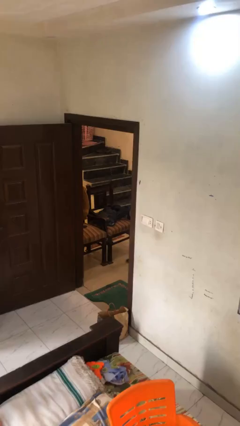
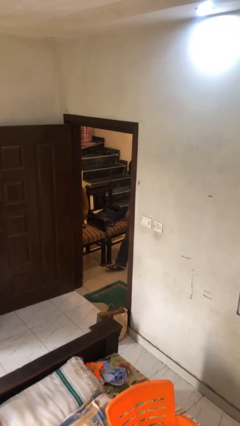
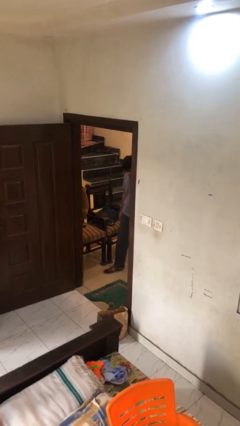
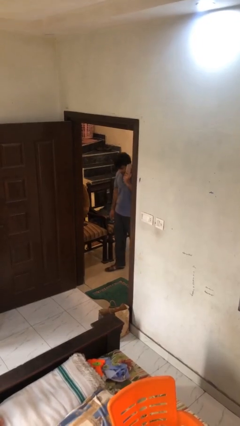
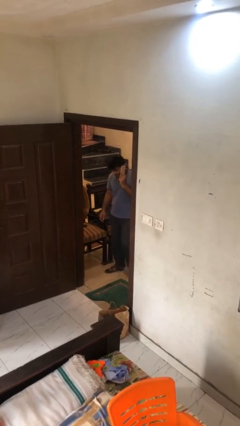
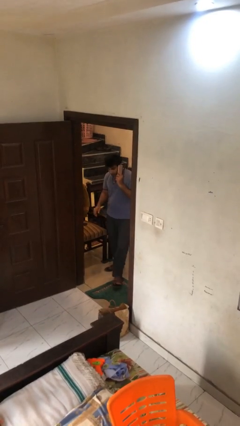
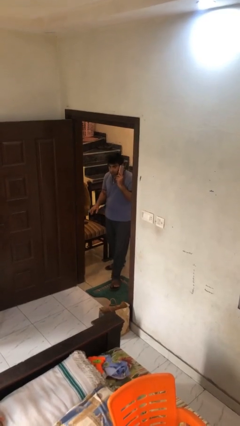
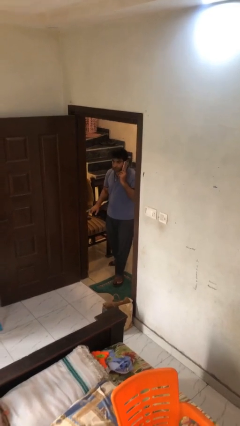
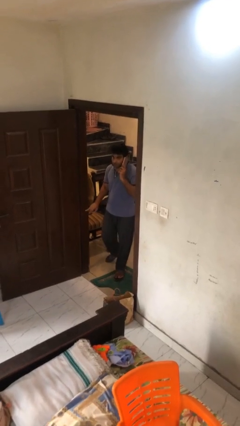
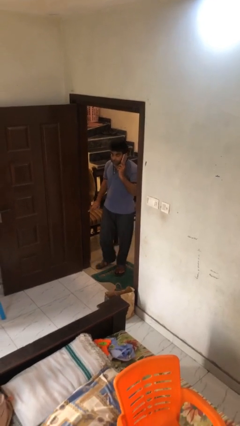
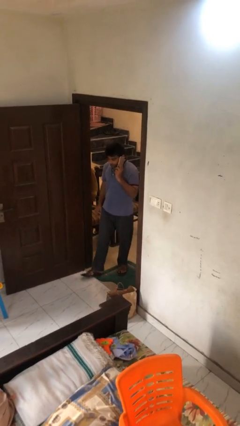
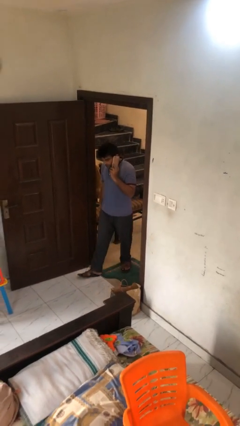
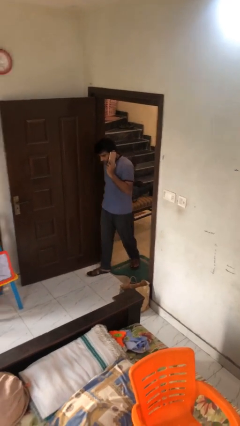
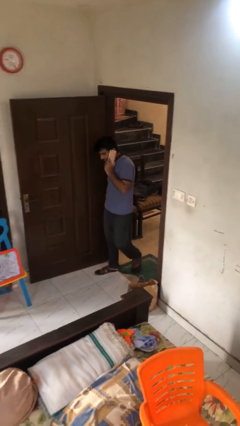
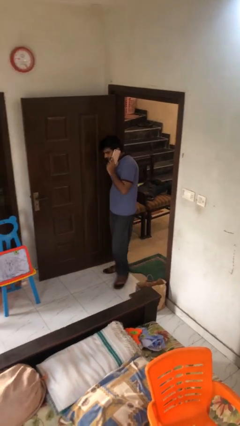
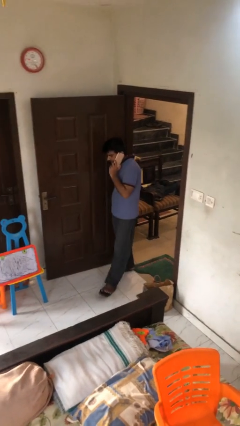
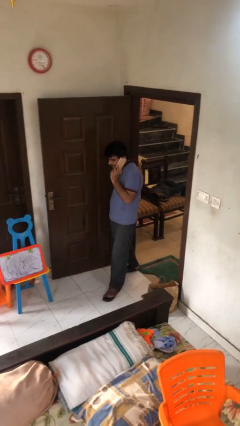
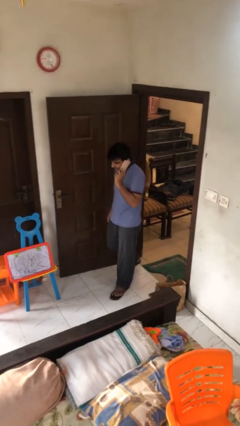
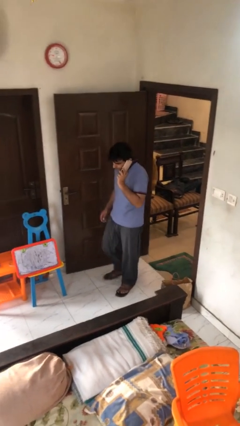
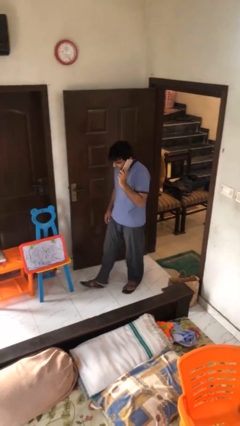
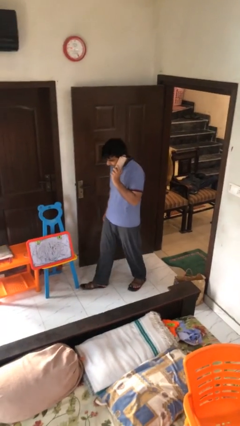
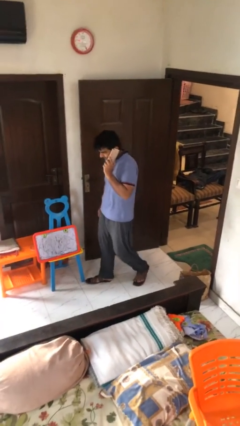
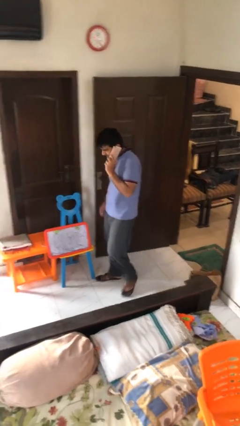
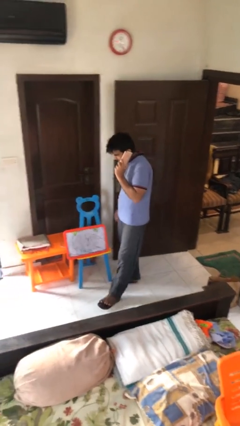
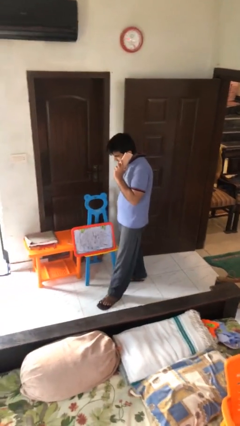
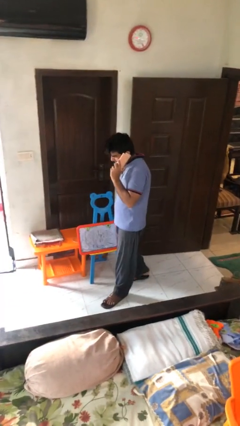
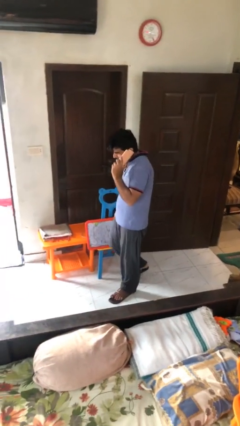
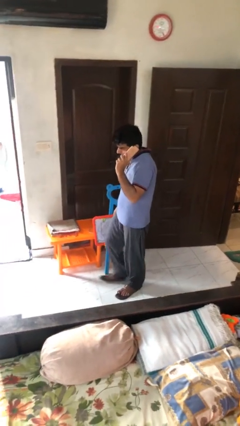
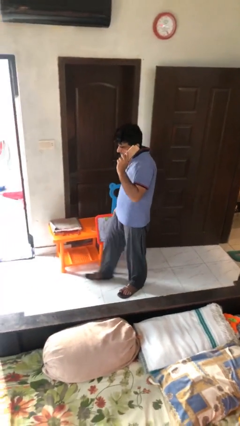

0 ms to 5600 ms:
person enters scene through structure

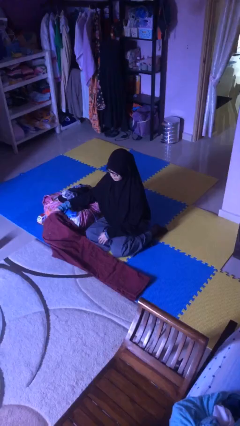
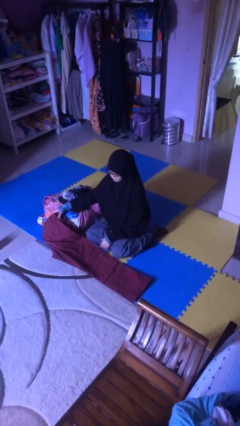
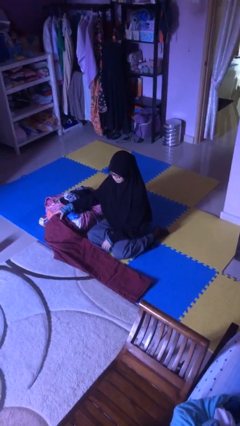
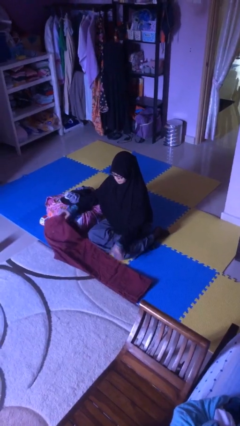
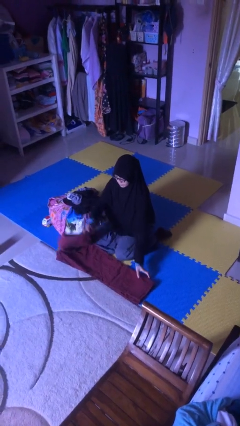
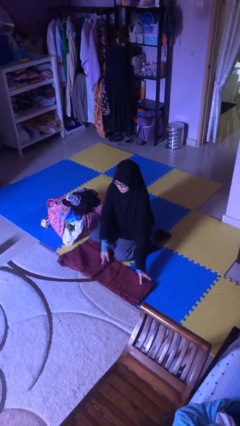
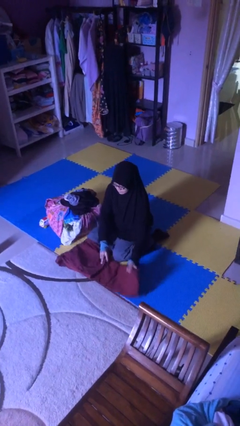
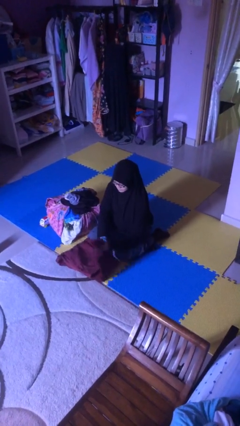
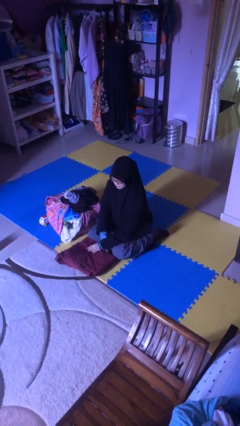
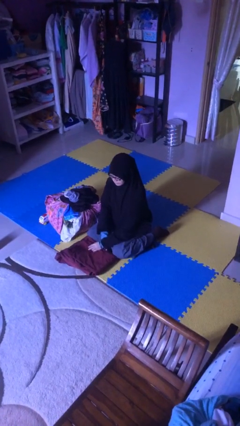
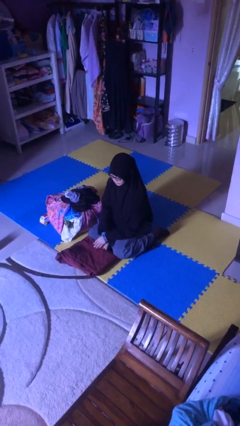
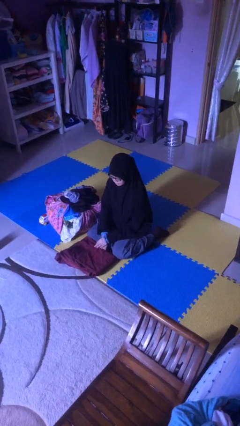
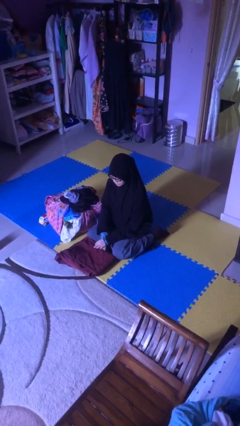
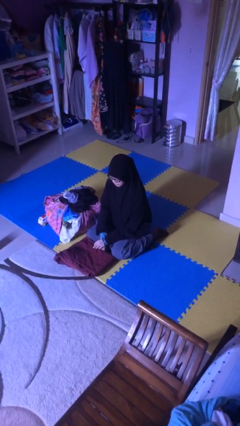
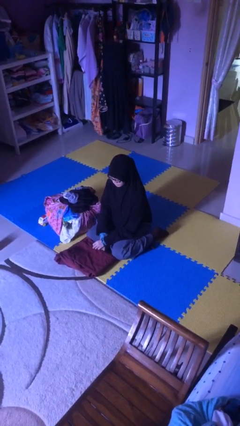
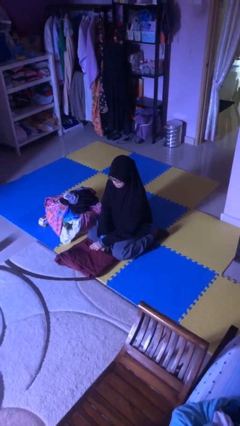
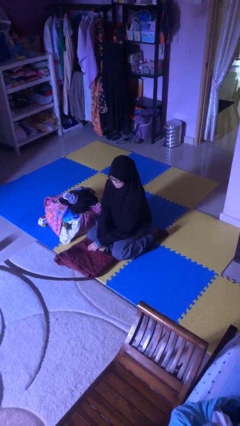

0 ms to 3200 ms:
person folds pants

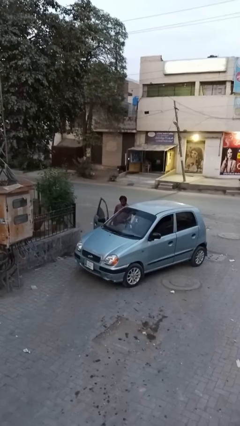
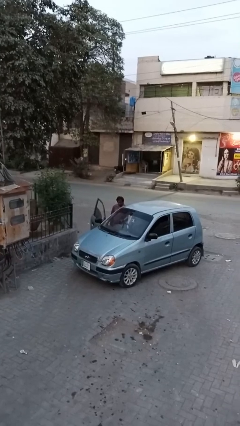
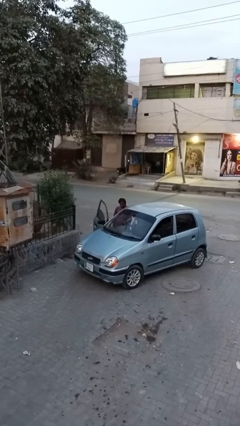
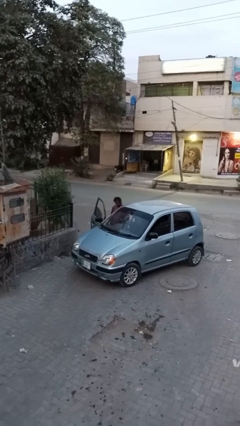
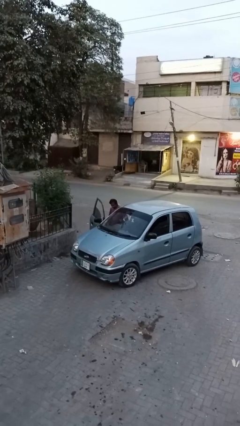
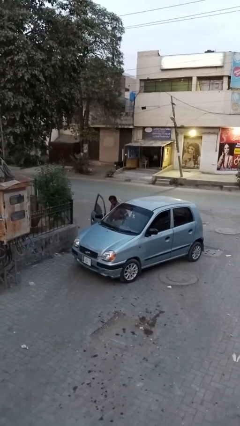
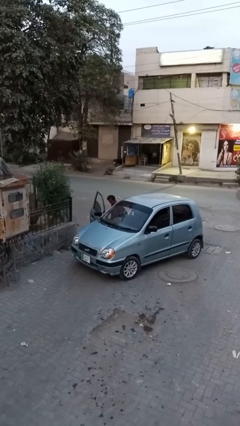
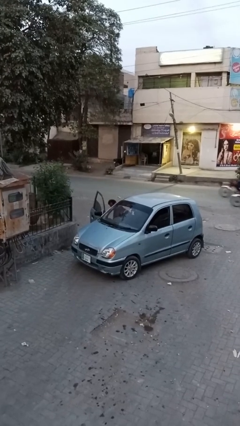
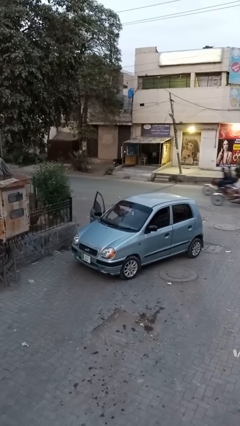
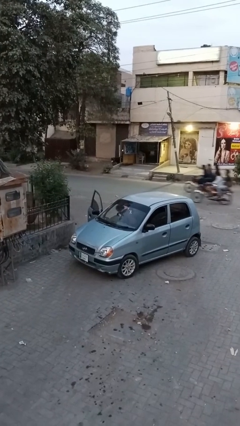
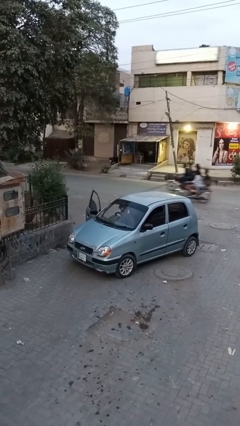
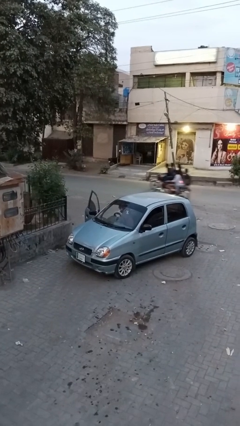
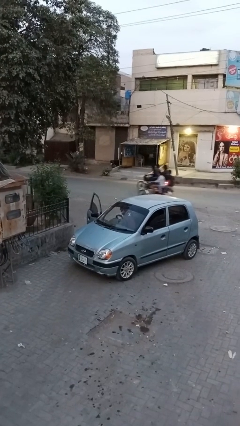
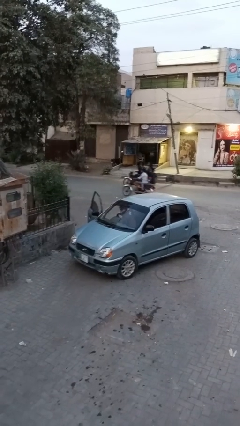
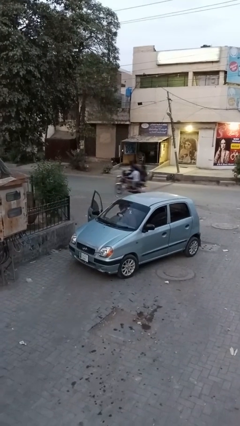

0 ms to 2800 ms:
person enters car

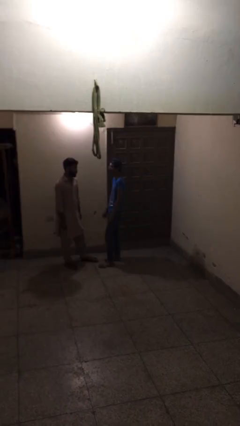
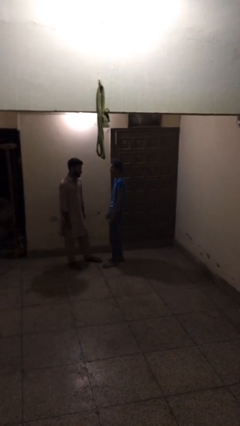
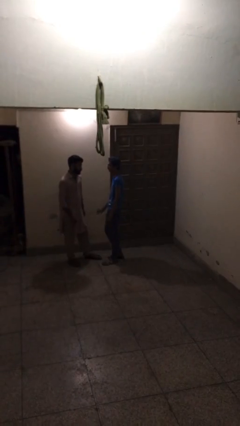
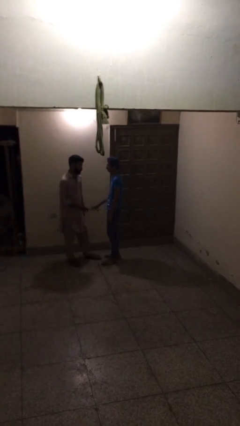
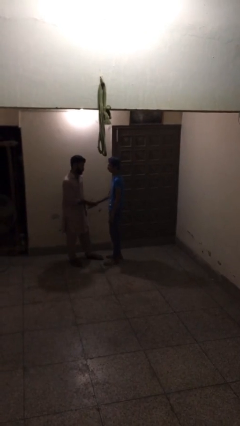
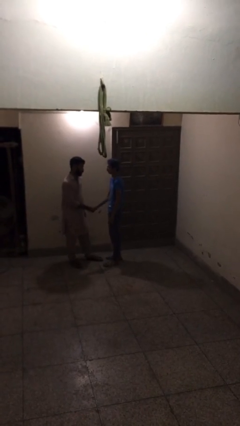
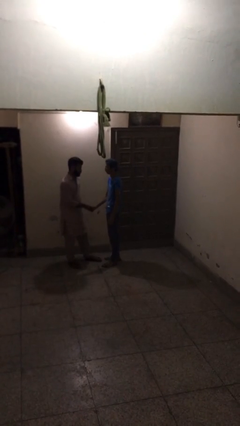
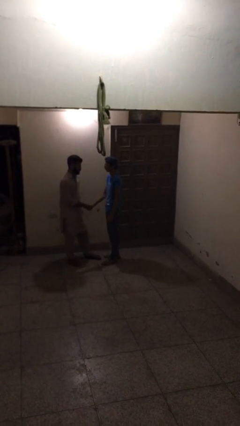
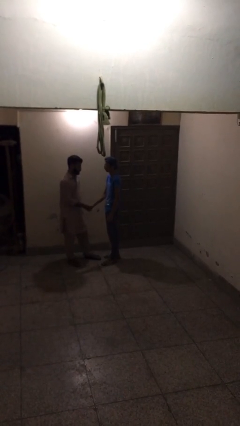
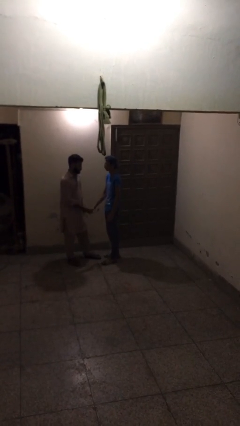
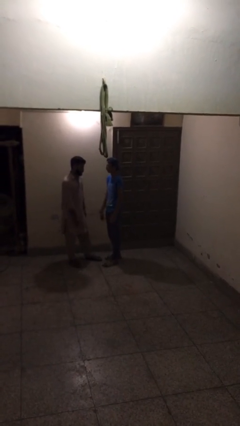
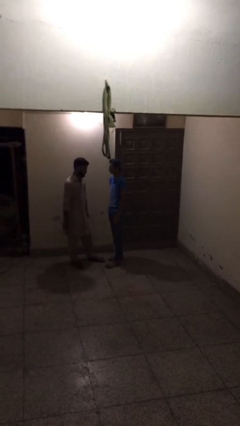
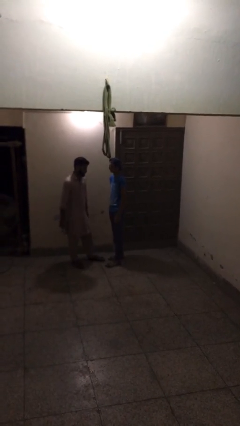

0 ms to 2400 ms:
person shakes hand

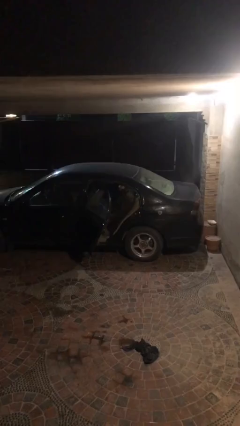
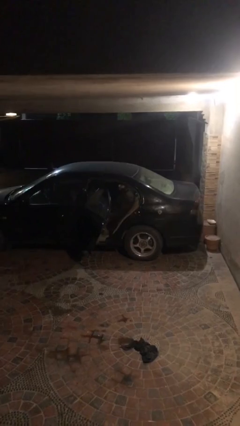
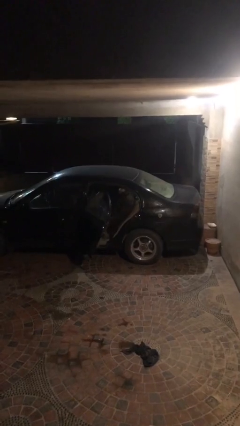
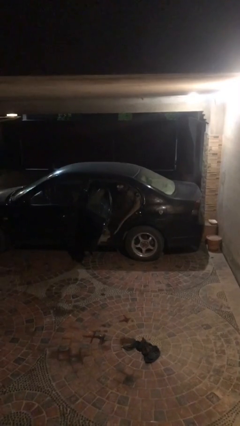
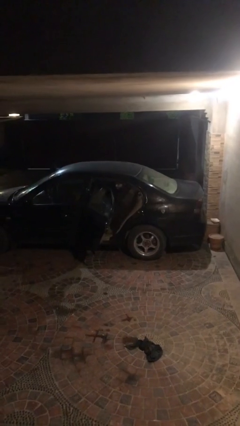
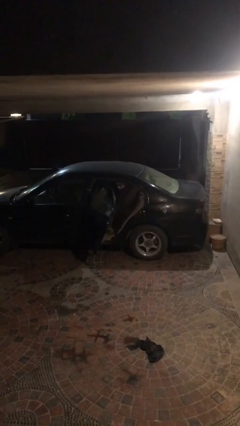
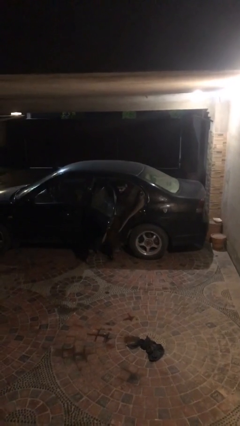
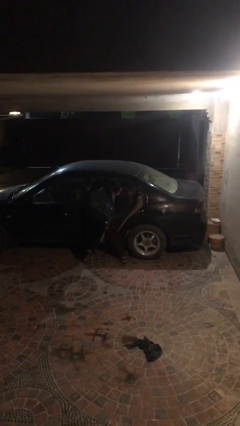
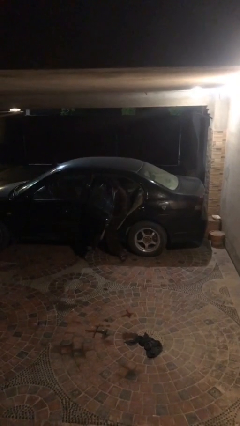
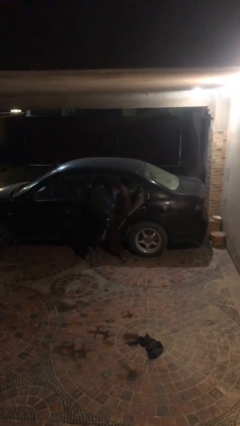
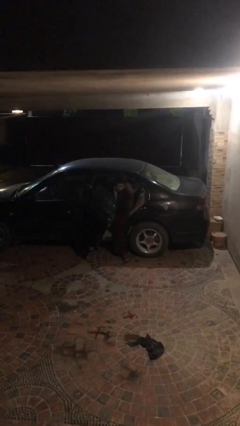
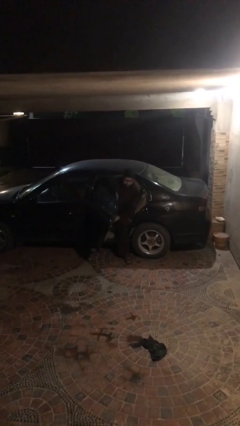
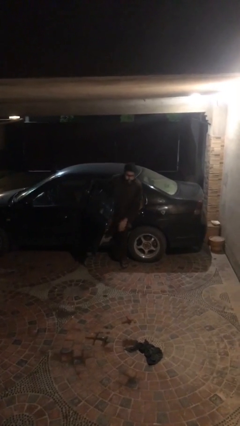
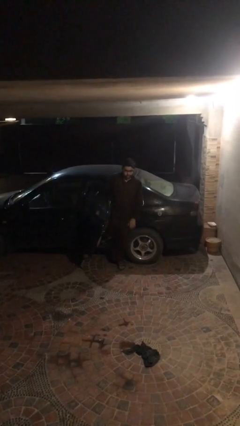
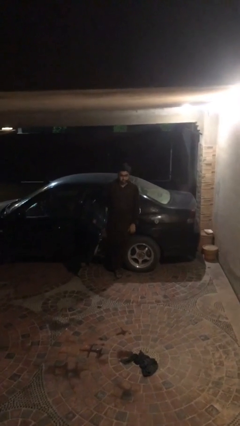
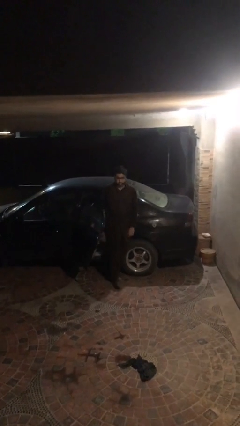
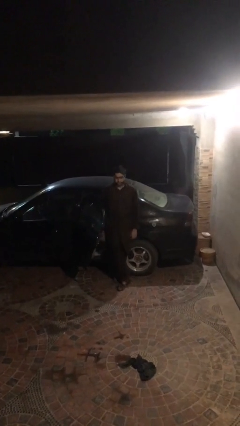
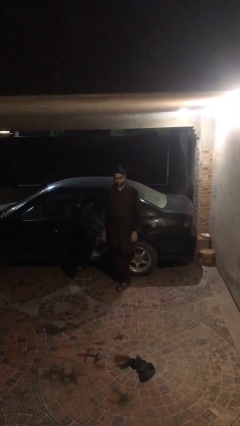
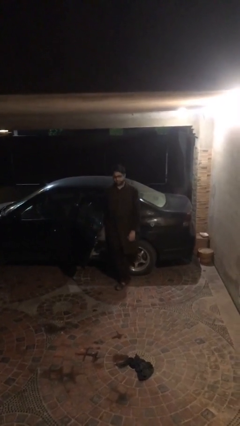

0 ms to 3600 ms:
person exits car
